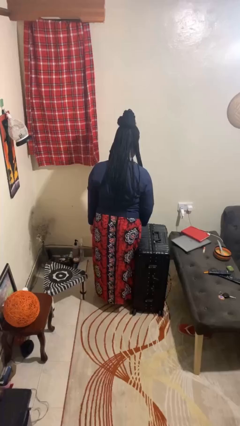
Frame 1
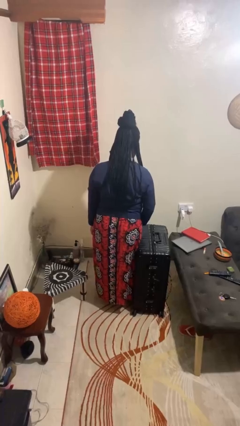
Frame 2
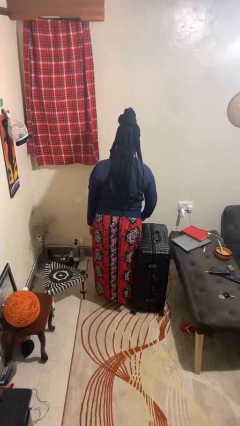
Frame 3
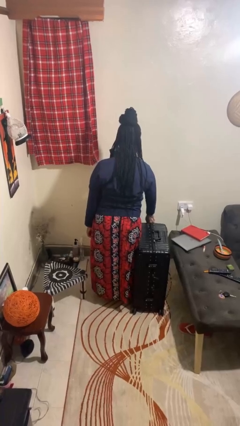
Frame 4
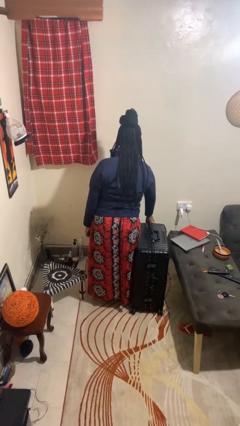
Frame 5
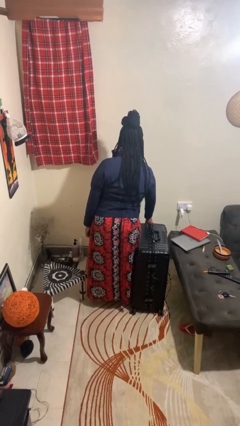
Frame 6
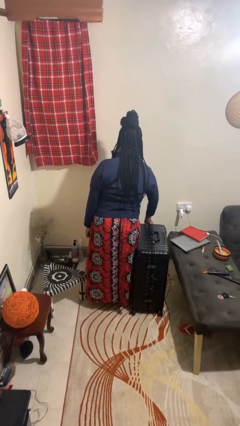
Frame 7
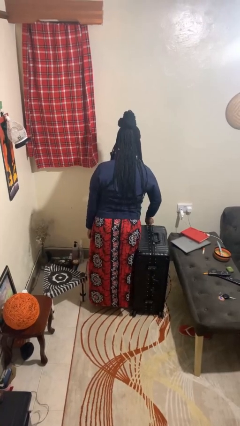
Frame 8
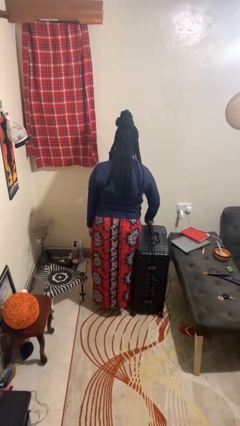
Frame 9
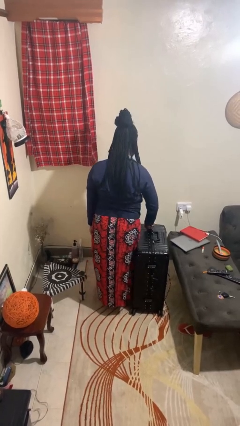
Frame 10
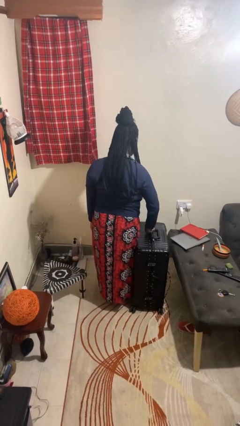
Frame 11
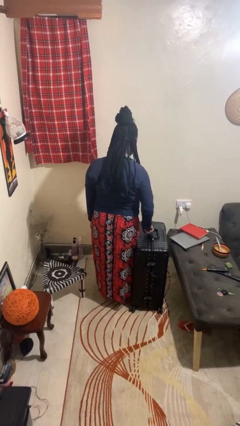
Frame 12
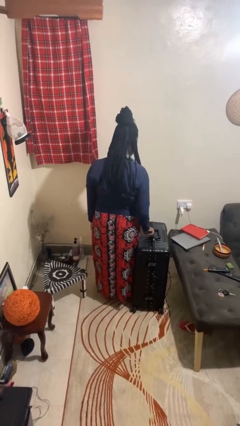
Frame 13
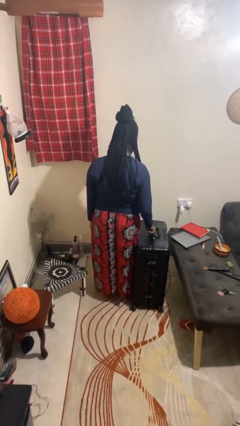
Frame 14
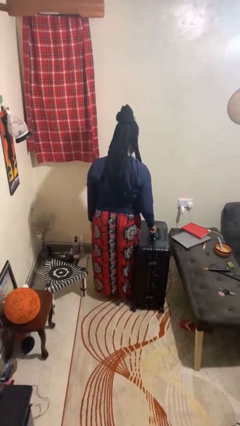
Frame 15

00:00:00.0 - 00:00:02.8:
person opens suitcase

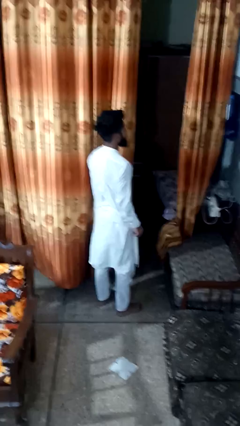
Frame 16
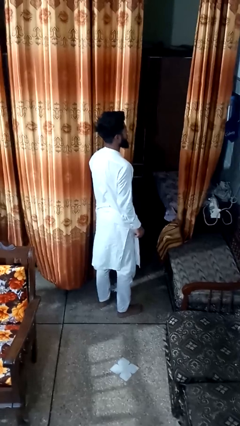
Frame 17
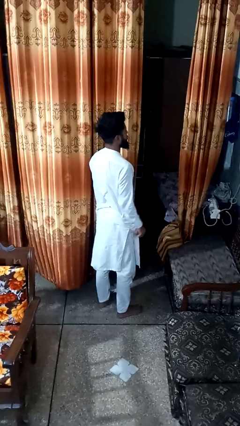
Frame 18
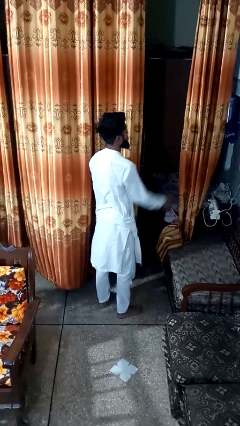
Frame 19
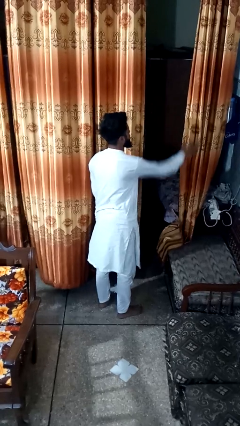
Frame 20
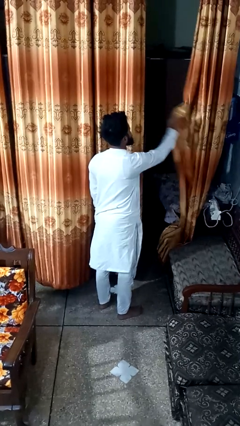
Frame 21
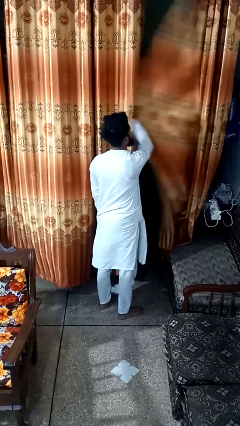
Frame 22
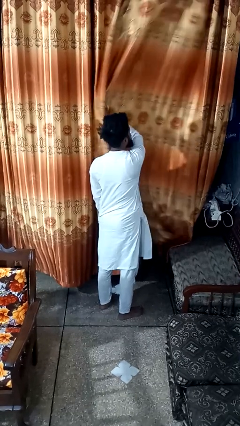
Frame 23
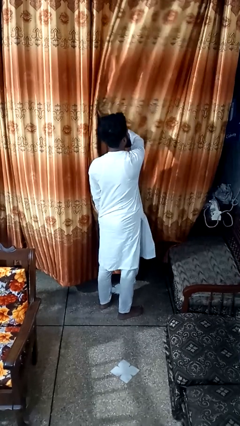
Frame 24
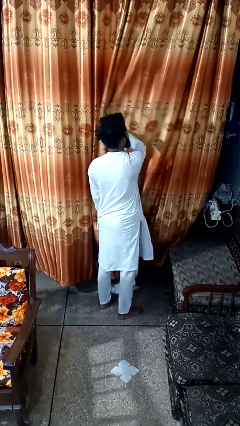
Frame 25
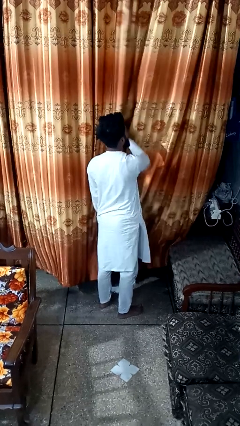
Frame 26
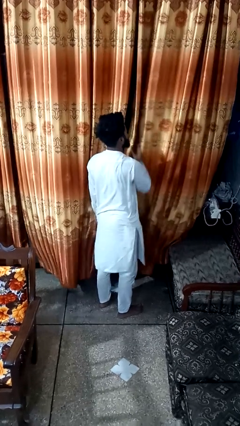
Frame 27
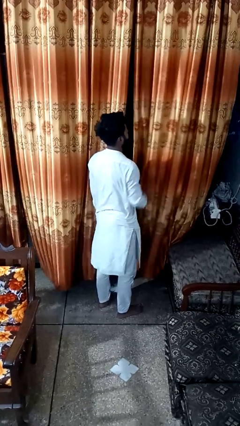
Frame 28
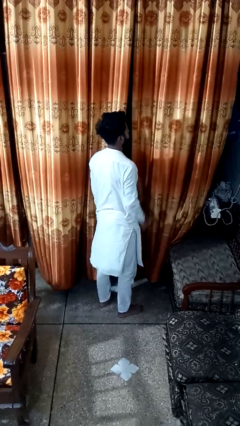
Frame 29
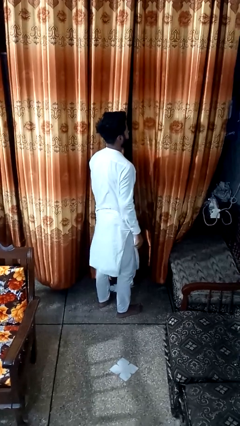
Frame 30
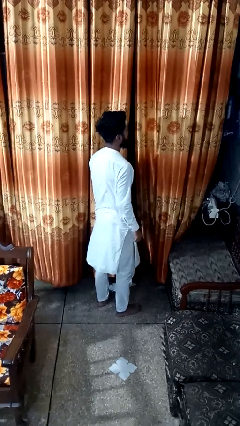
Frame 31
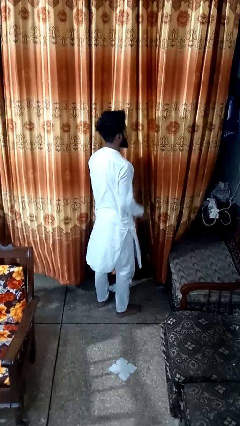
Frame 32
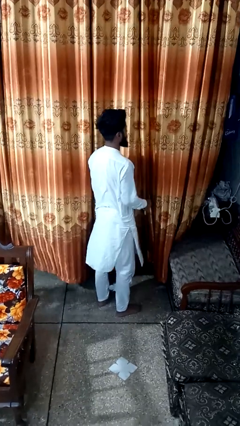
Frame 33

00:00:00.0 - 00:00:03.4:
person closes curtains

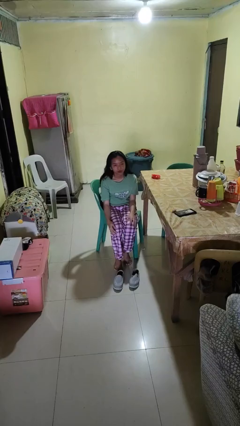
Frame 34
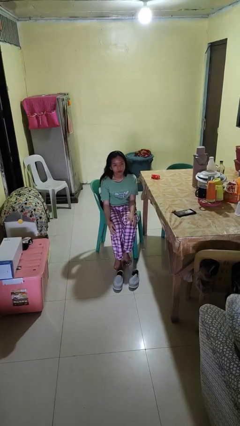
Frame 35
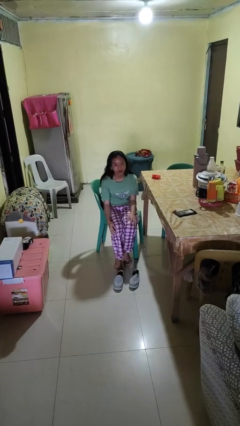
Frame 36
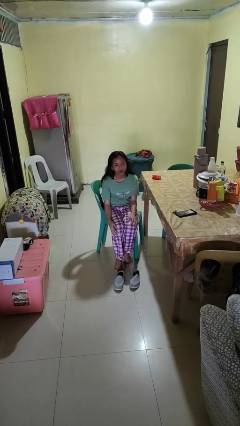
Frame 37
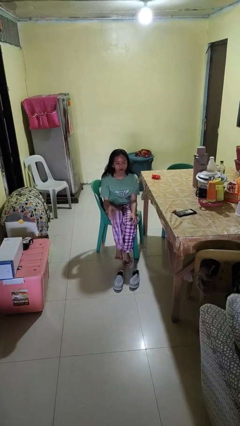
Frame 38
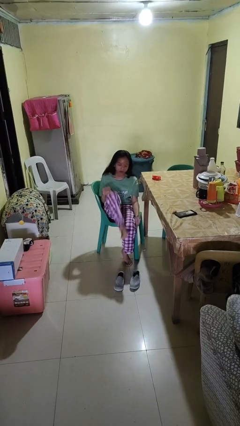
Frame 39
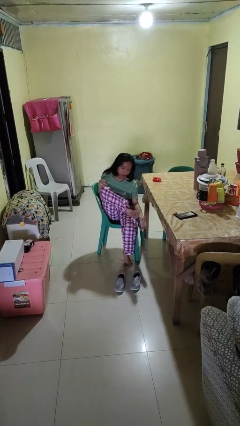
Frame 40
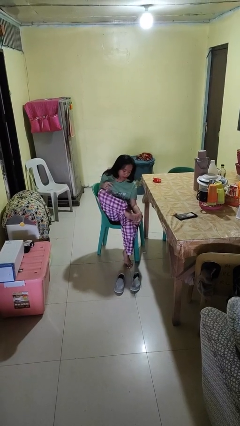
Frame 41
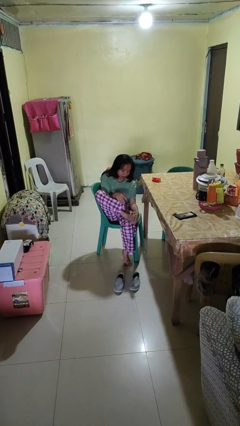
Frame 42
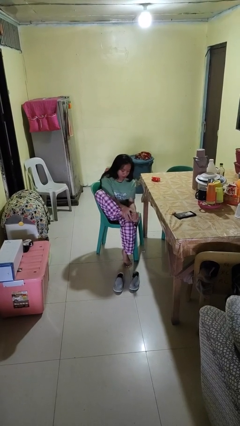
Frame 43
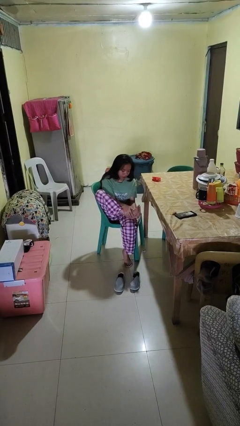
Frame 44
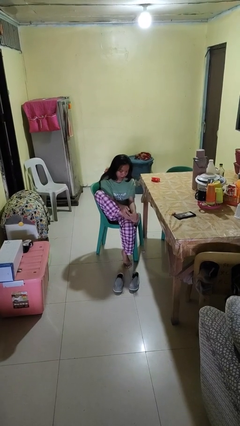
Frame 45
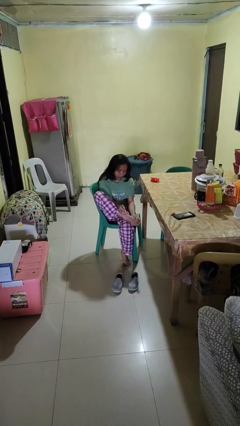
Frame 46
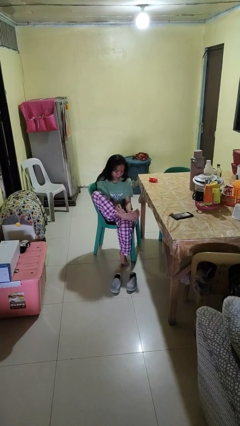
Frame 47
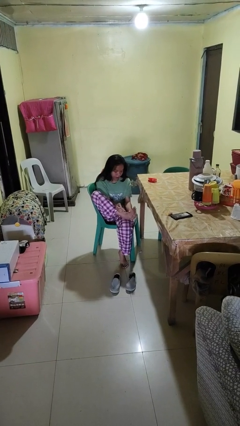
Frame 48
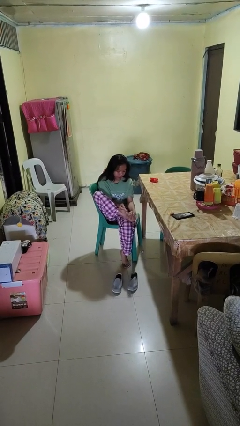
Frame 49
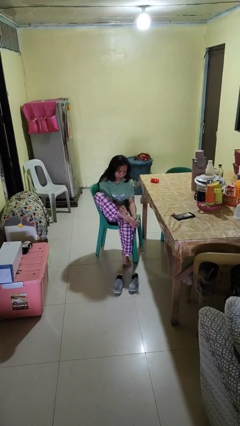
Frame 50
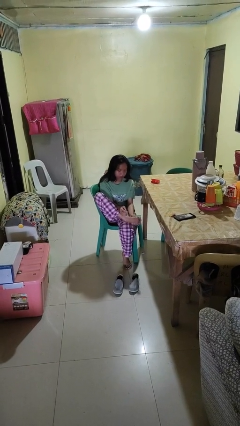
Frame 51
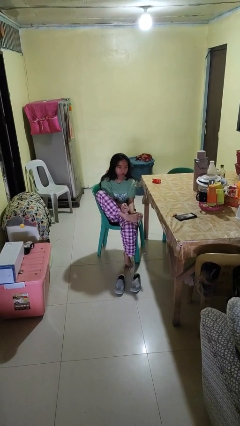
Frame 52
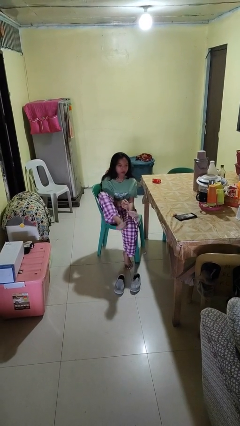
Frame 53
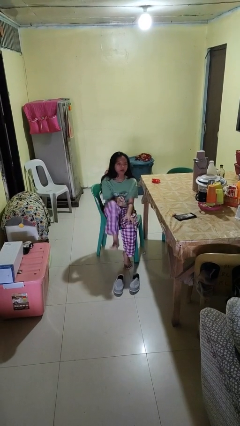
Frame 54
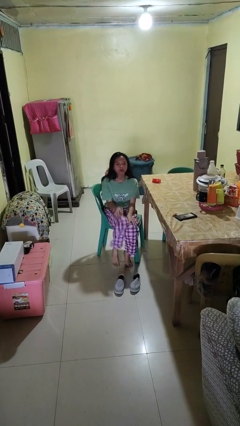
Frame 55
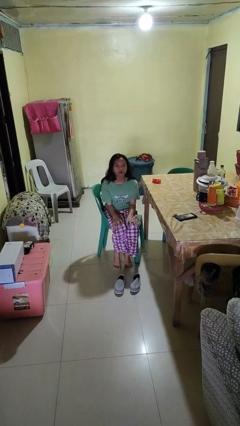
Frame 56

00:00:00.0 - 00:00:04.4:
person rubs foot

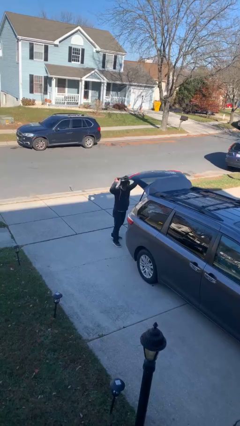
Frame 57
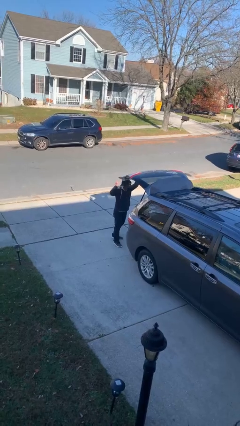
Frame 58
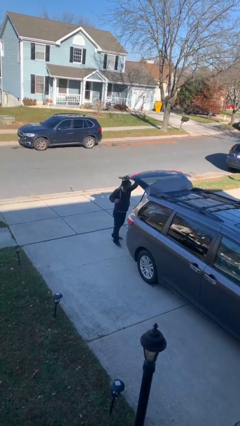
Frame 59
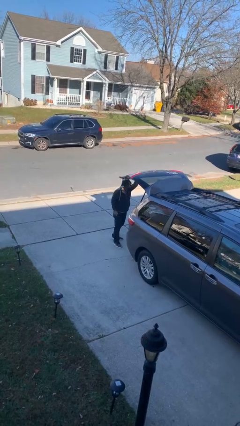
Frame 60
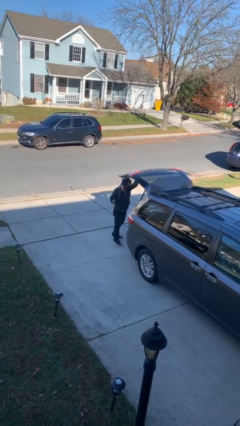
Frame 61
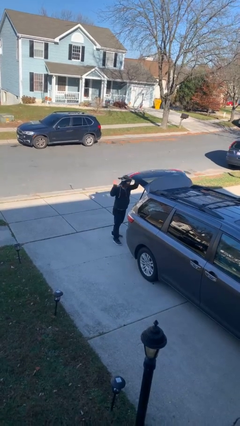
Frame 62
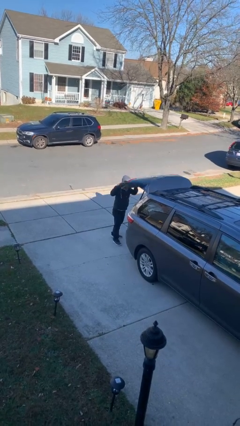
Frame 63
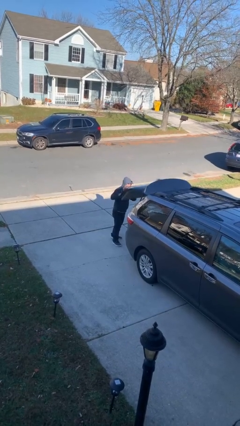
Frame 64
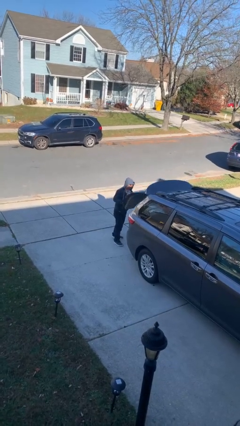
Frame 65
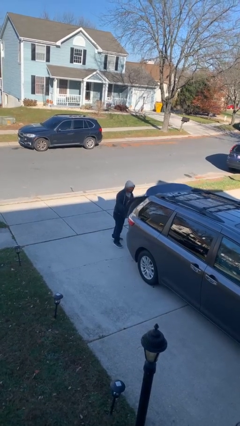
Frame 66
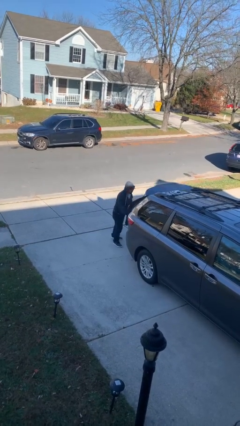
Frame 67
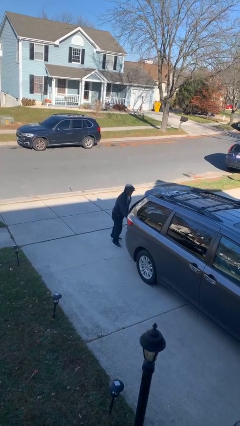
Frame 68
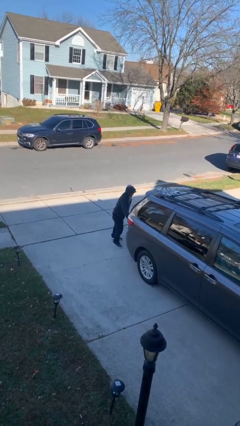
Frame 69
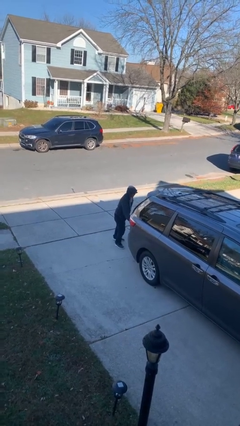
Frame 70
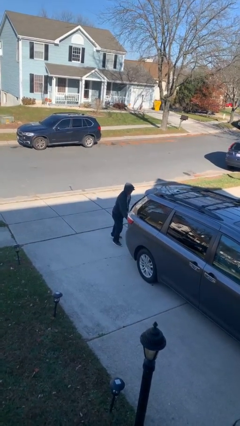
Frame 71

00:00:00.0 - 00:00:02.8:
person closes car trunk

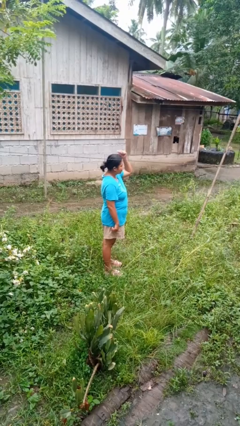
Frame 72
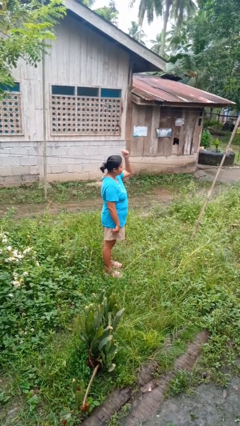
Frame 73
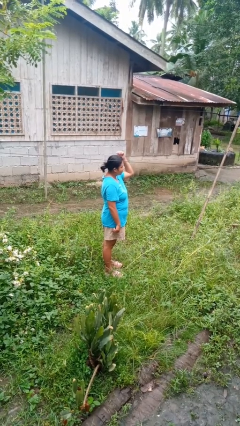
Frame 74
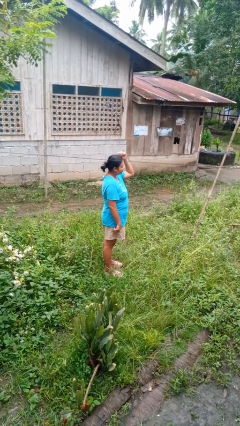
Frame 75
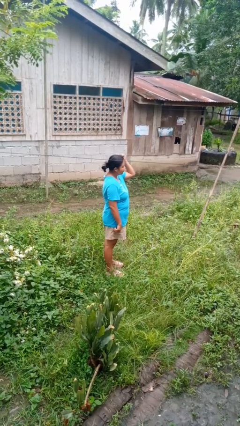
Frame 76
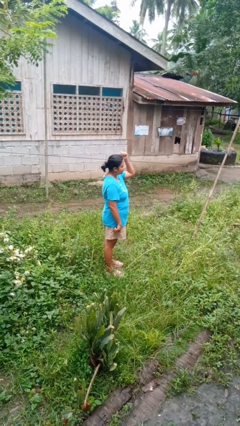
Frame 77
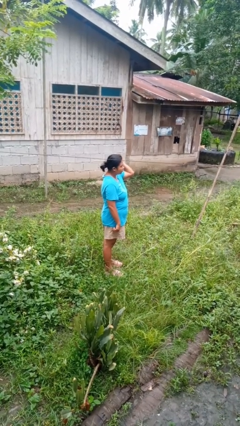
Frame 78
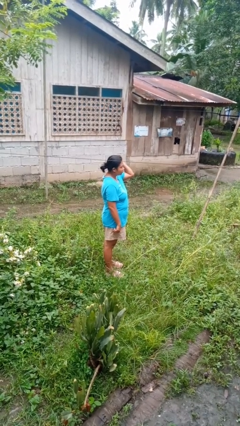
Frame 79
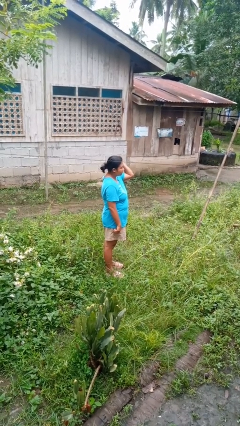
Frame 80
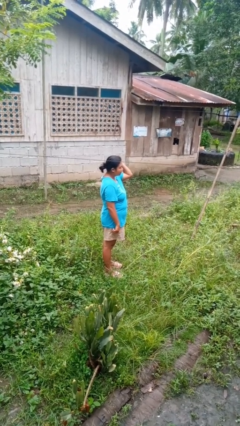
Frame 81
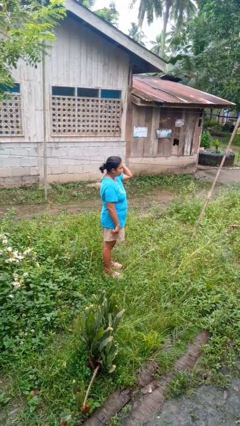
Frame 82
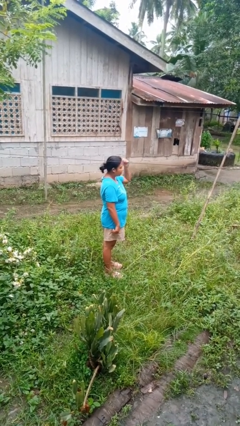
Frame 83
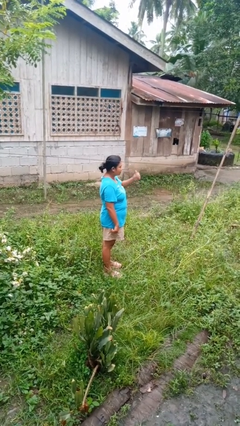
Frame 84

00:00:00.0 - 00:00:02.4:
person gestures behind me

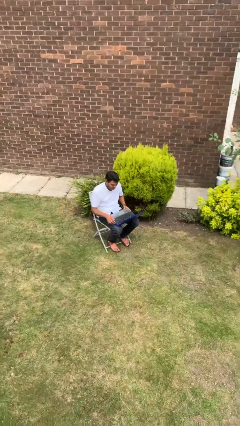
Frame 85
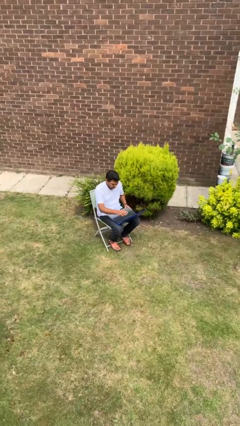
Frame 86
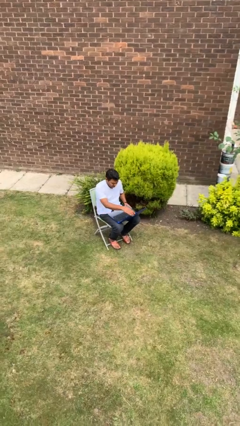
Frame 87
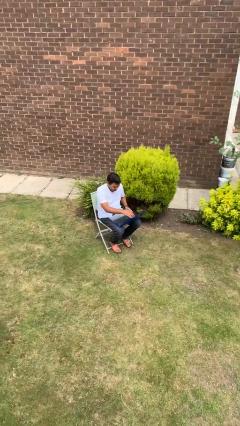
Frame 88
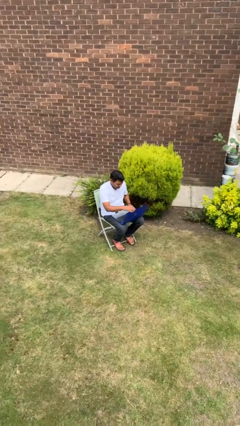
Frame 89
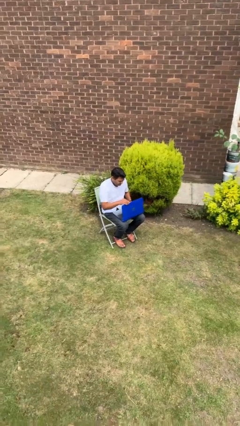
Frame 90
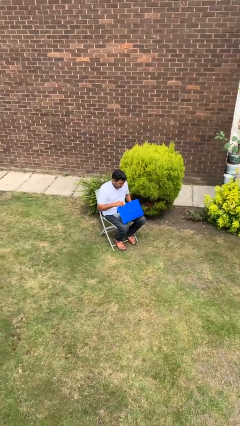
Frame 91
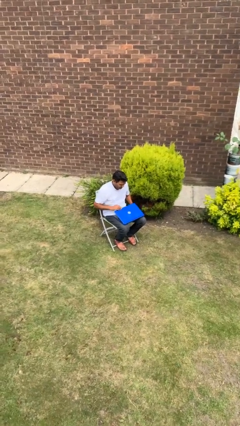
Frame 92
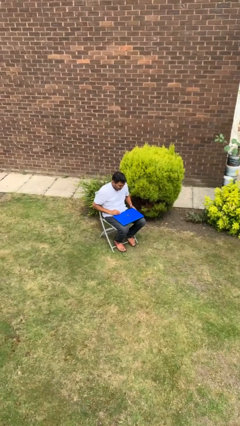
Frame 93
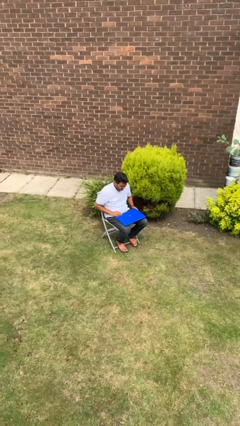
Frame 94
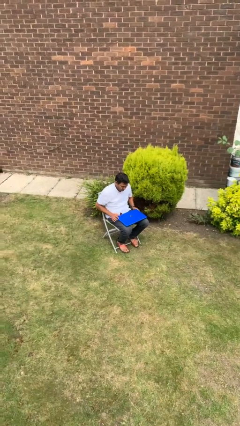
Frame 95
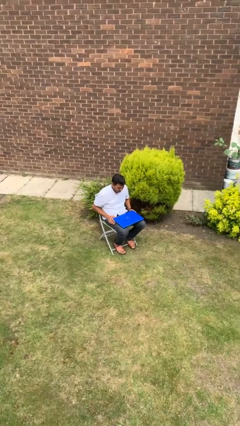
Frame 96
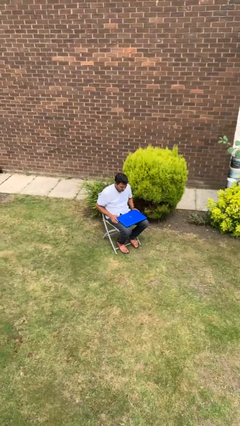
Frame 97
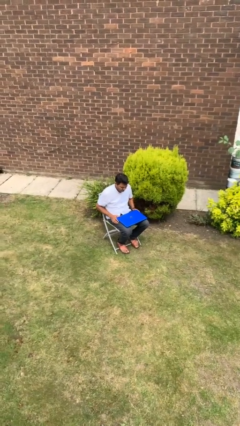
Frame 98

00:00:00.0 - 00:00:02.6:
person closes laptop
